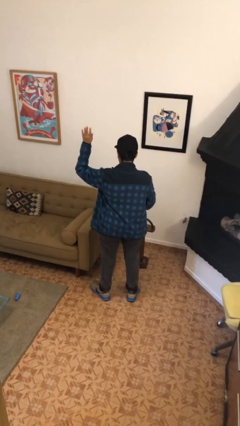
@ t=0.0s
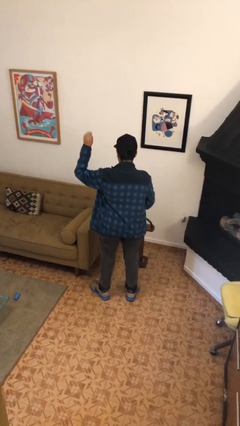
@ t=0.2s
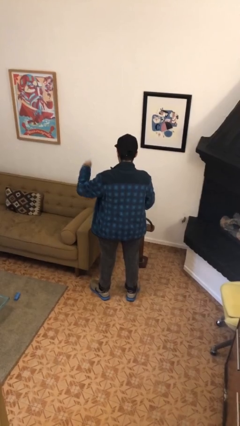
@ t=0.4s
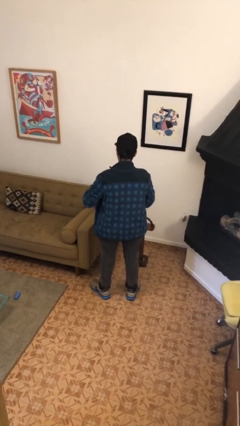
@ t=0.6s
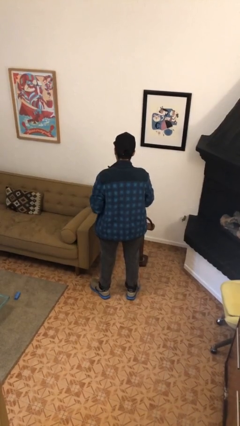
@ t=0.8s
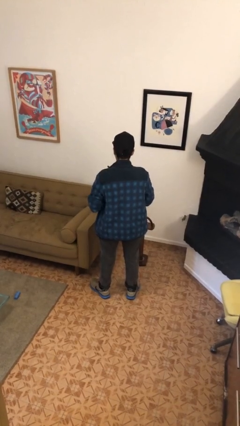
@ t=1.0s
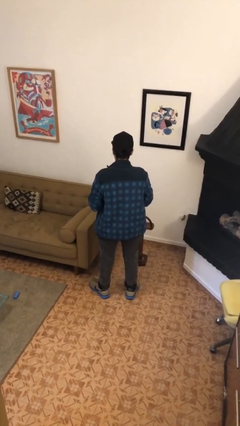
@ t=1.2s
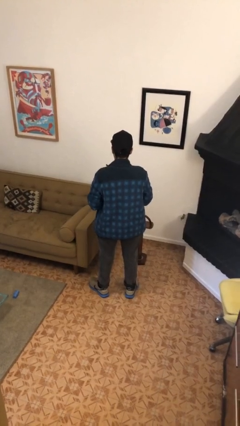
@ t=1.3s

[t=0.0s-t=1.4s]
person gestures lower hand

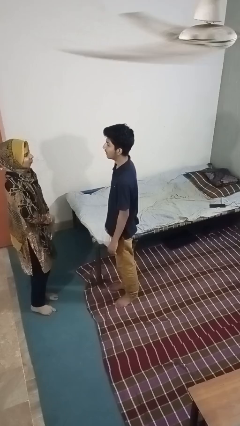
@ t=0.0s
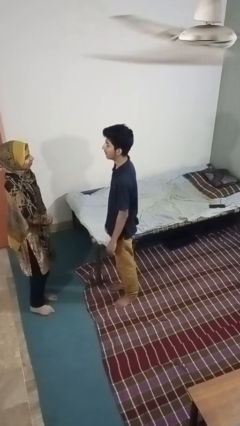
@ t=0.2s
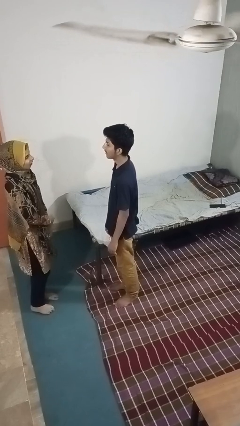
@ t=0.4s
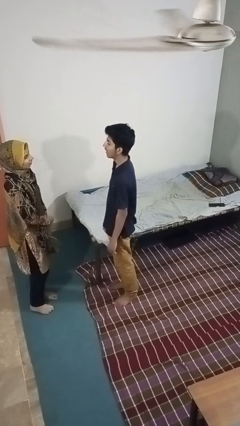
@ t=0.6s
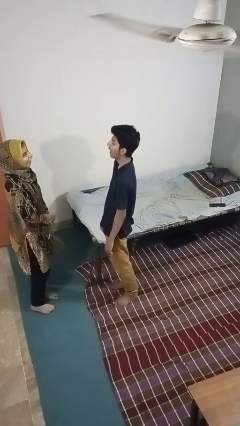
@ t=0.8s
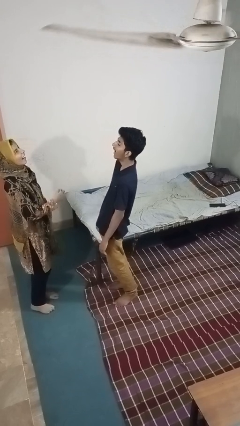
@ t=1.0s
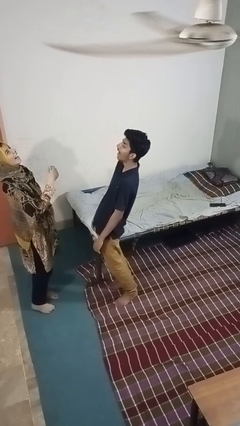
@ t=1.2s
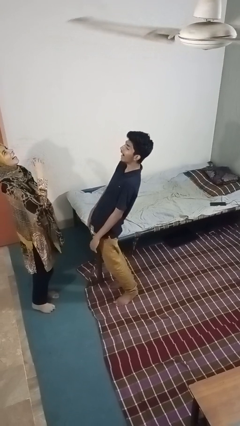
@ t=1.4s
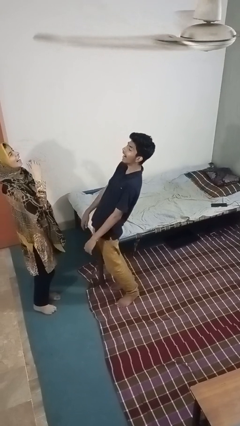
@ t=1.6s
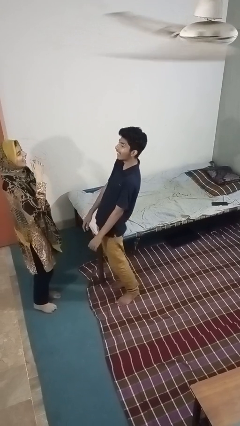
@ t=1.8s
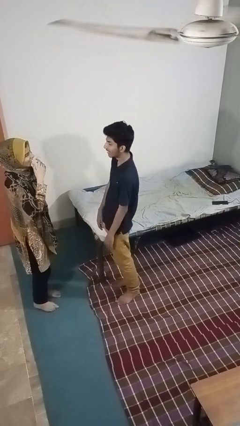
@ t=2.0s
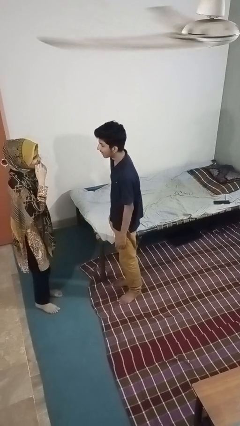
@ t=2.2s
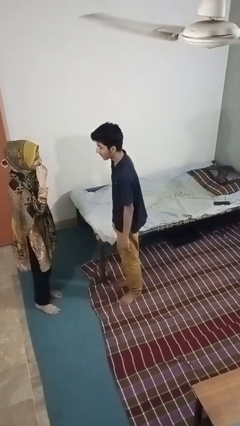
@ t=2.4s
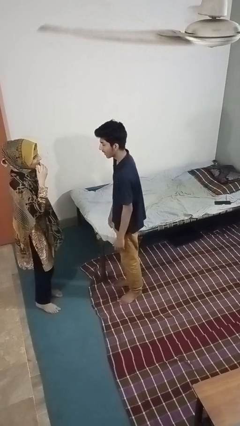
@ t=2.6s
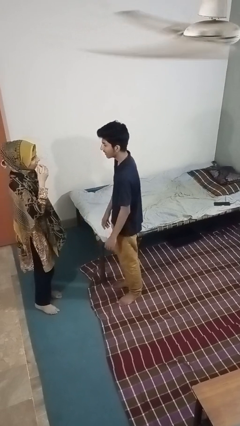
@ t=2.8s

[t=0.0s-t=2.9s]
person laughs with person

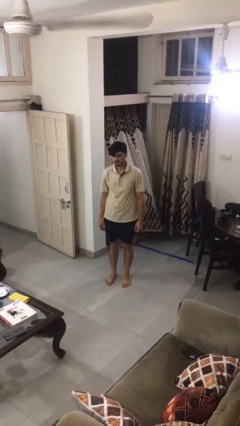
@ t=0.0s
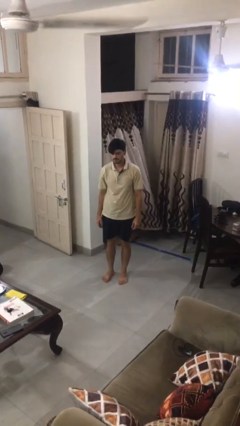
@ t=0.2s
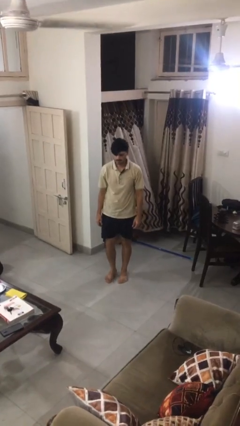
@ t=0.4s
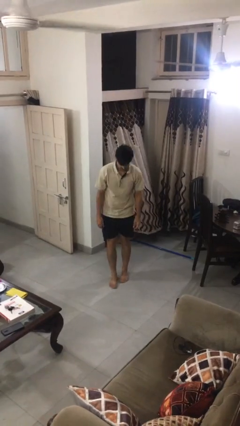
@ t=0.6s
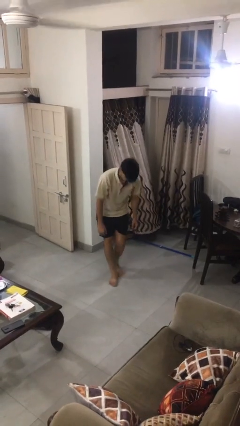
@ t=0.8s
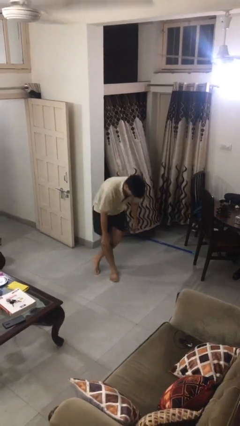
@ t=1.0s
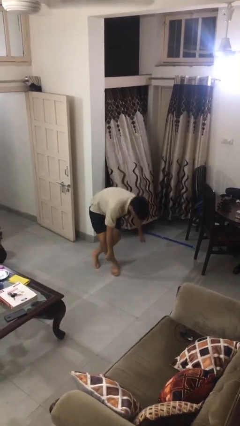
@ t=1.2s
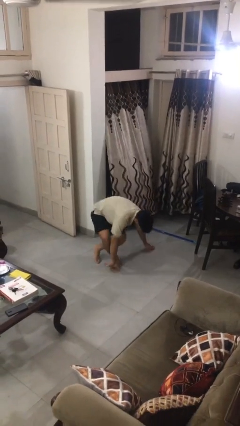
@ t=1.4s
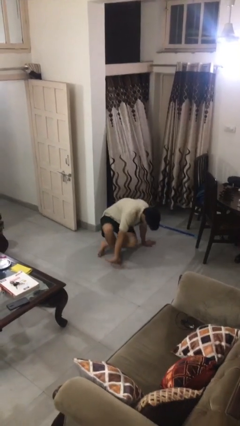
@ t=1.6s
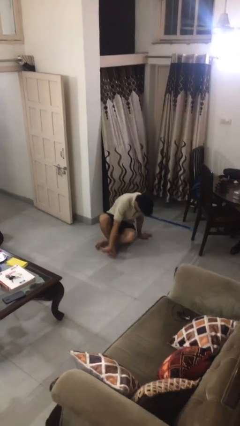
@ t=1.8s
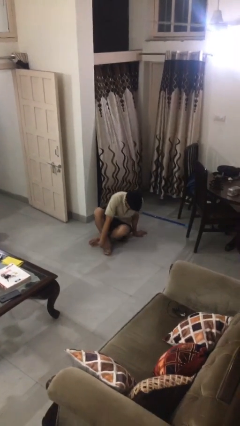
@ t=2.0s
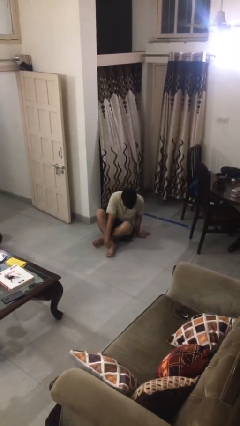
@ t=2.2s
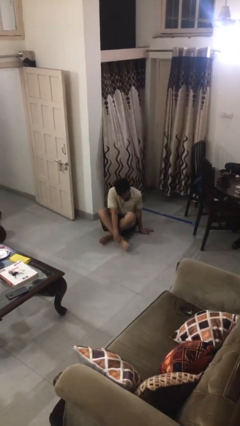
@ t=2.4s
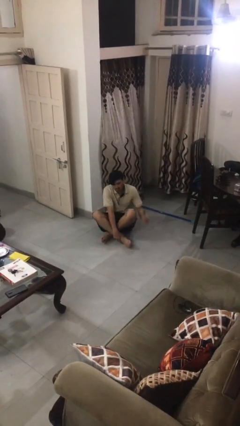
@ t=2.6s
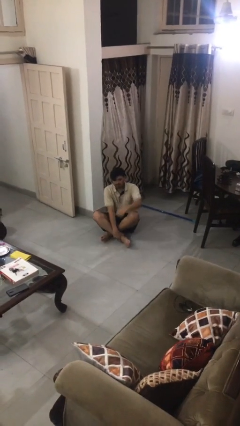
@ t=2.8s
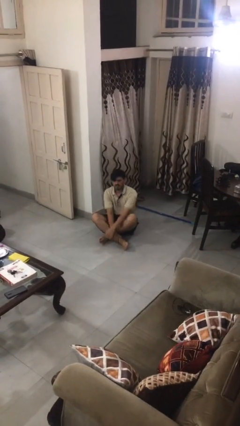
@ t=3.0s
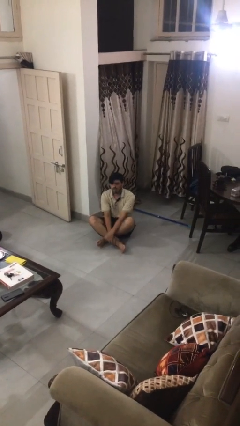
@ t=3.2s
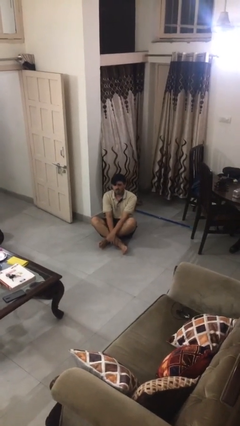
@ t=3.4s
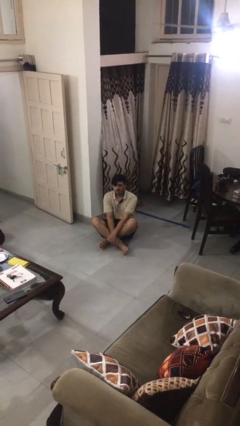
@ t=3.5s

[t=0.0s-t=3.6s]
person sits crisscross

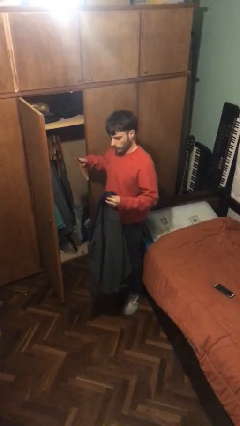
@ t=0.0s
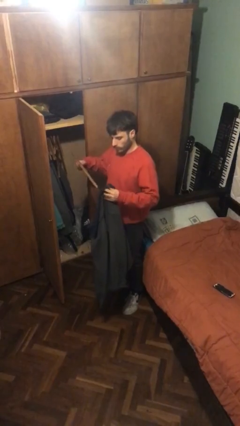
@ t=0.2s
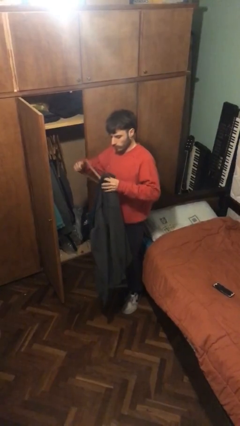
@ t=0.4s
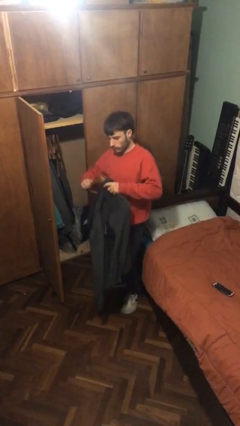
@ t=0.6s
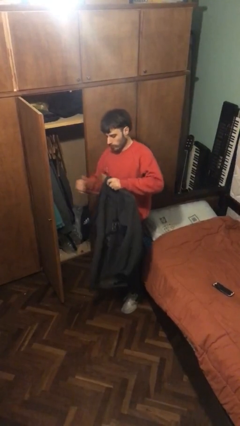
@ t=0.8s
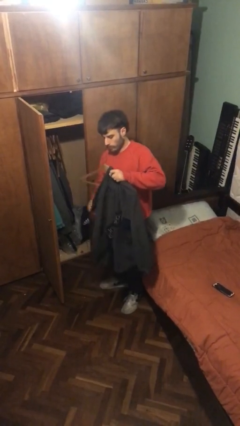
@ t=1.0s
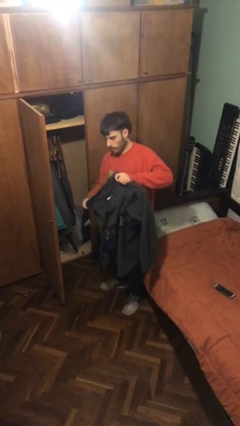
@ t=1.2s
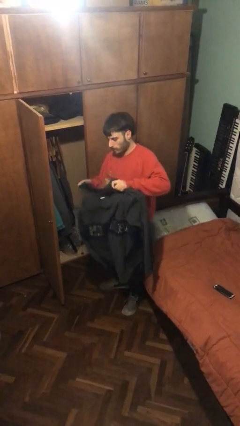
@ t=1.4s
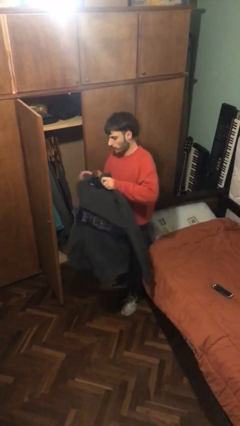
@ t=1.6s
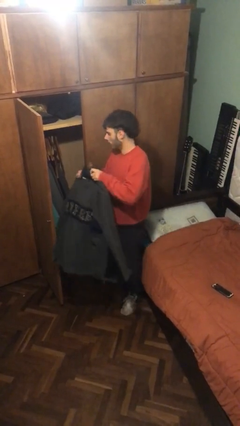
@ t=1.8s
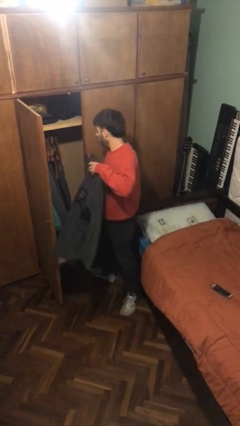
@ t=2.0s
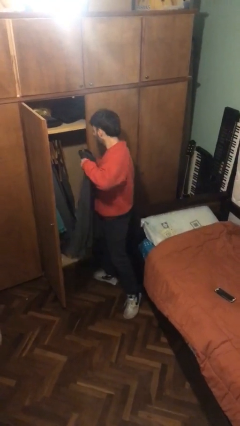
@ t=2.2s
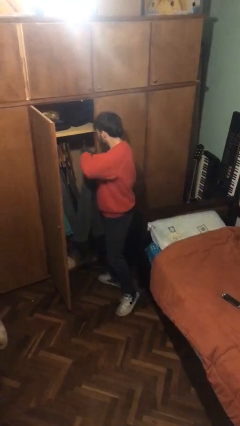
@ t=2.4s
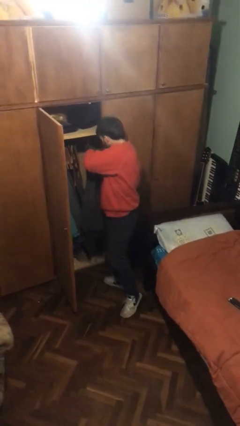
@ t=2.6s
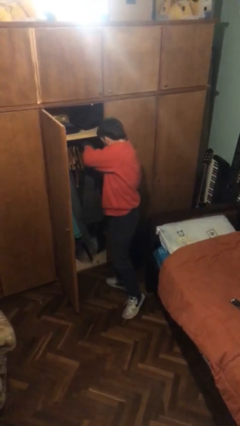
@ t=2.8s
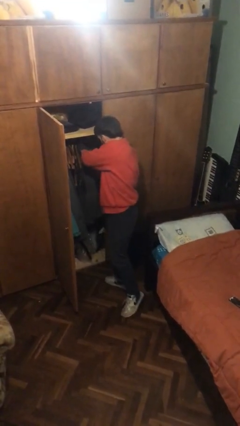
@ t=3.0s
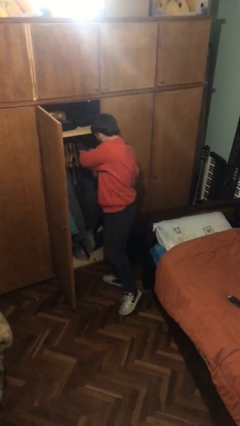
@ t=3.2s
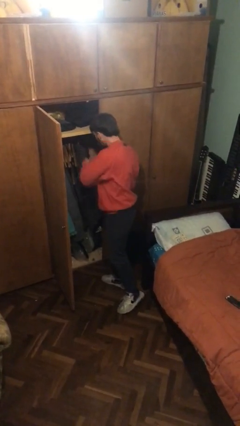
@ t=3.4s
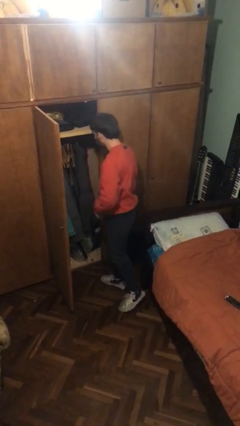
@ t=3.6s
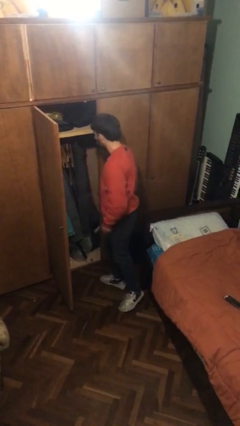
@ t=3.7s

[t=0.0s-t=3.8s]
person puts clothes into closet

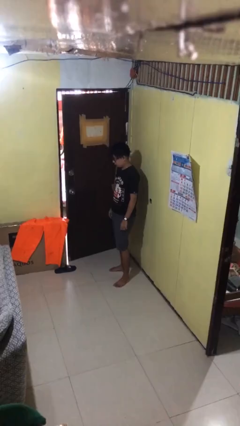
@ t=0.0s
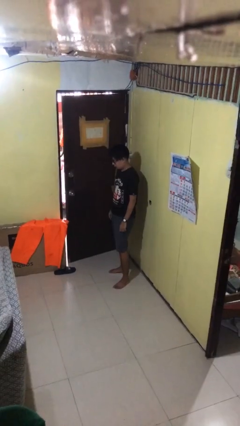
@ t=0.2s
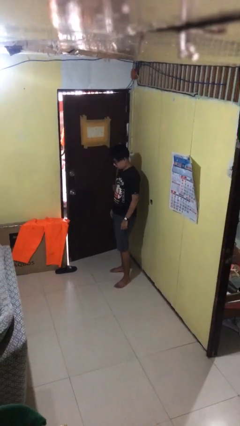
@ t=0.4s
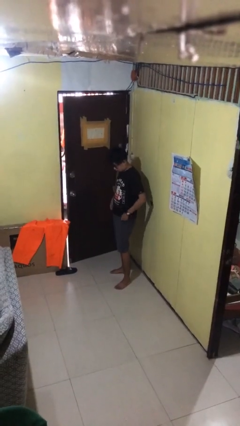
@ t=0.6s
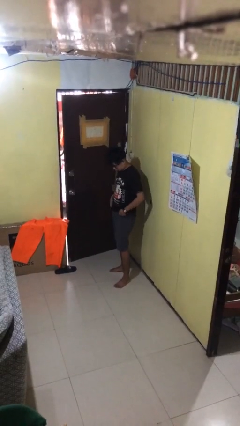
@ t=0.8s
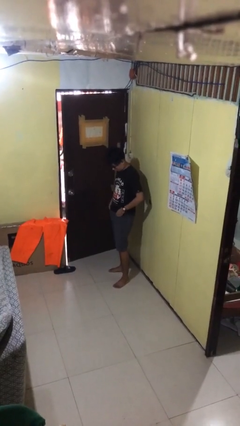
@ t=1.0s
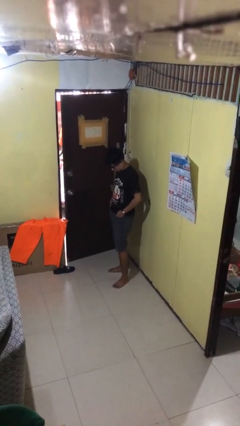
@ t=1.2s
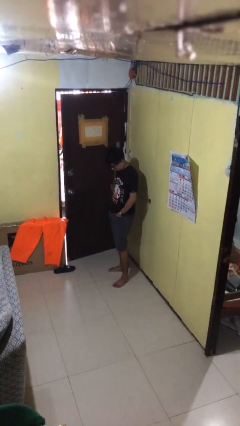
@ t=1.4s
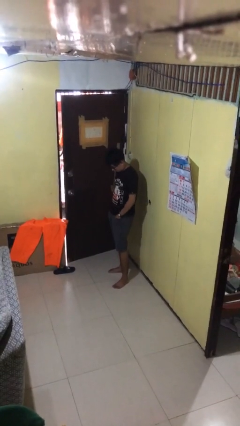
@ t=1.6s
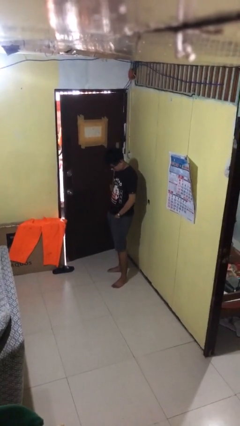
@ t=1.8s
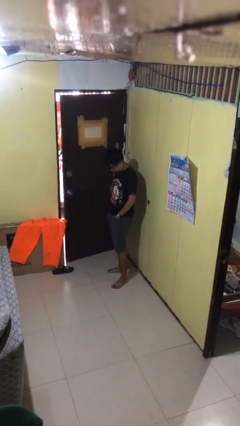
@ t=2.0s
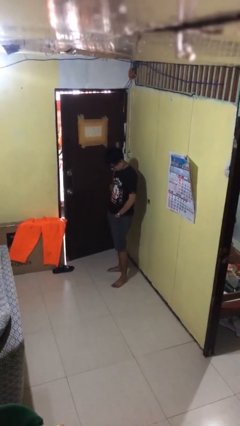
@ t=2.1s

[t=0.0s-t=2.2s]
person puts hands in back pockets

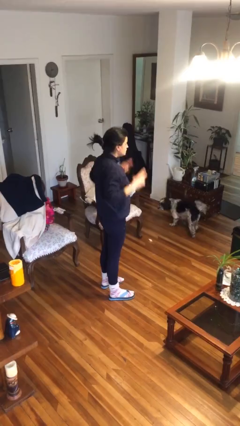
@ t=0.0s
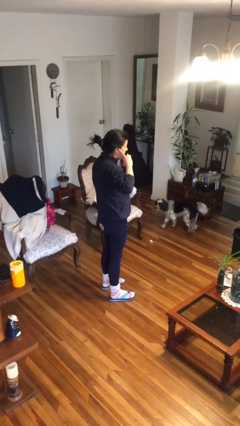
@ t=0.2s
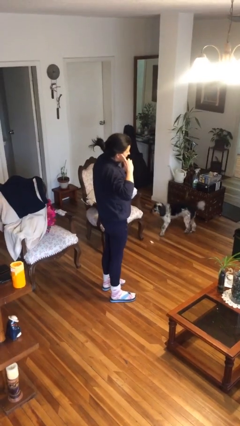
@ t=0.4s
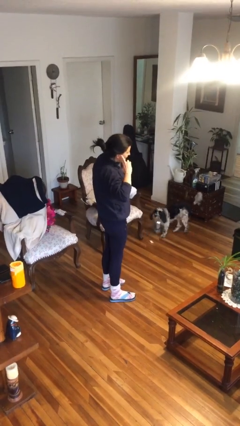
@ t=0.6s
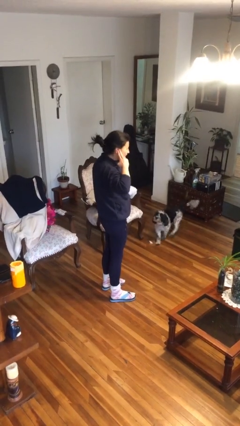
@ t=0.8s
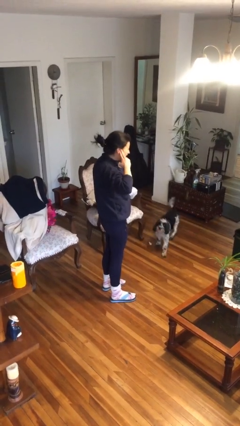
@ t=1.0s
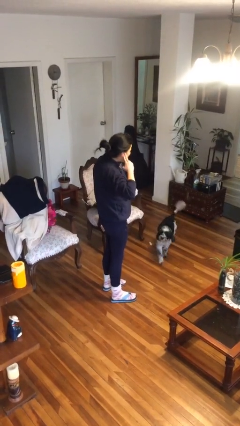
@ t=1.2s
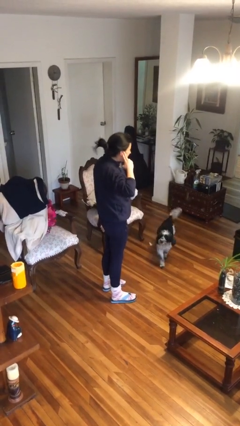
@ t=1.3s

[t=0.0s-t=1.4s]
person puts fingers in ear

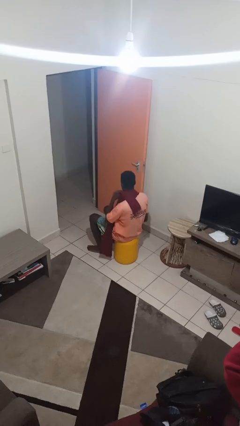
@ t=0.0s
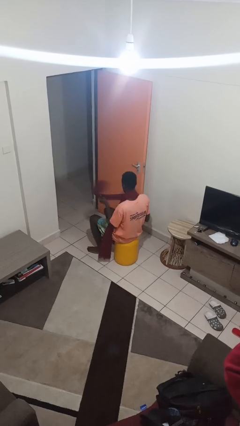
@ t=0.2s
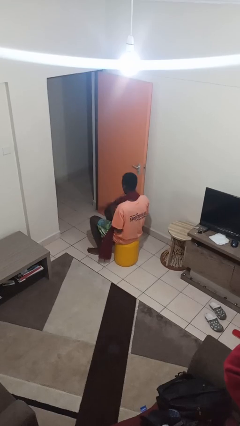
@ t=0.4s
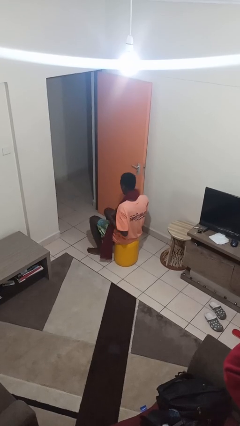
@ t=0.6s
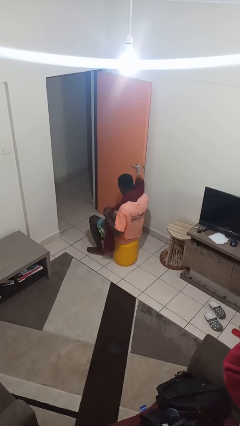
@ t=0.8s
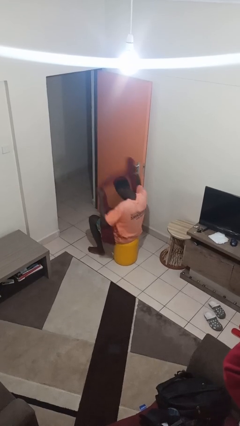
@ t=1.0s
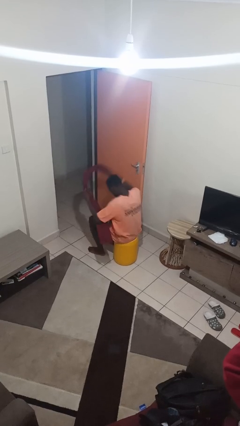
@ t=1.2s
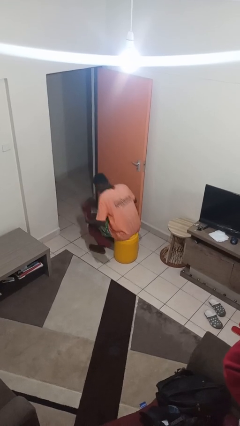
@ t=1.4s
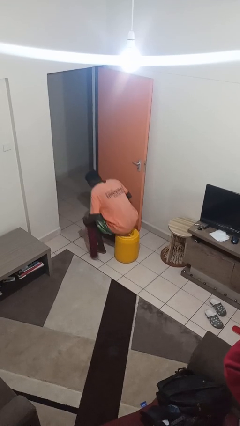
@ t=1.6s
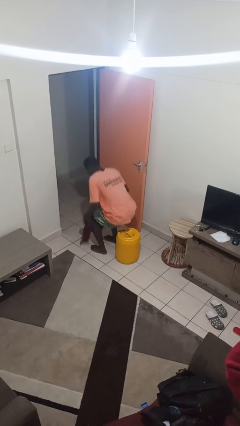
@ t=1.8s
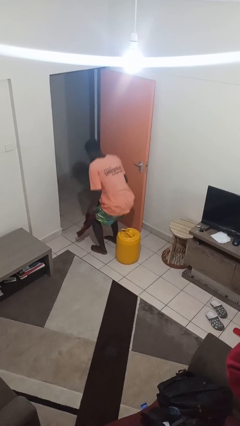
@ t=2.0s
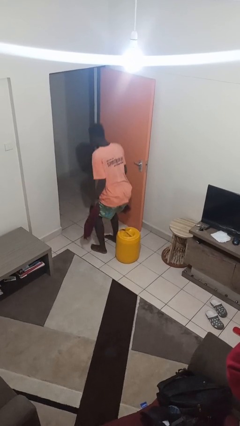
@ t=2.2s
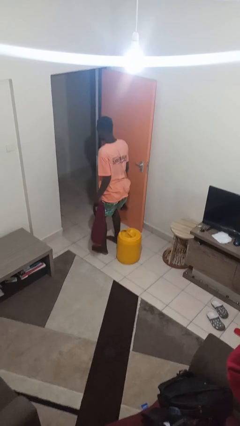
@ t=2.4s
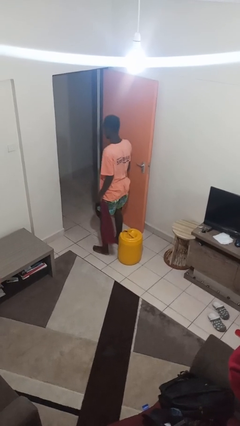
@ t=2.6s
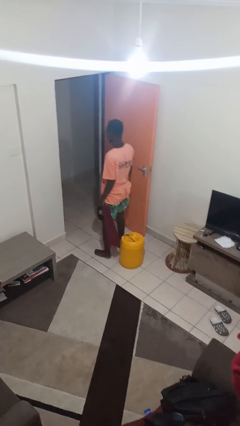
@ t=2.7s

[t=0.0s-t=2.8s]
person takes off scarf
